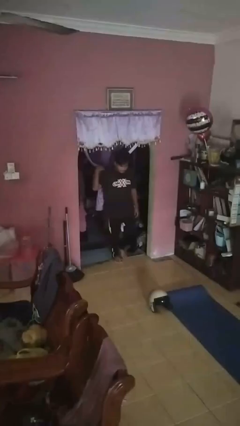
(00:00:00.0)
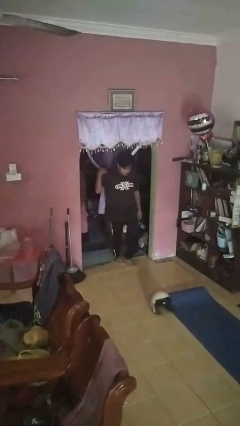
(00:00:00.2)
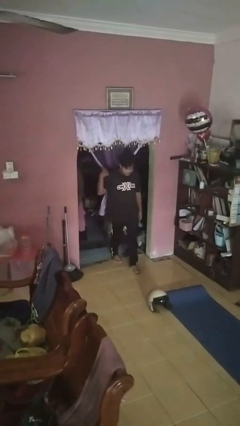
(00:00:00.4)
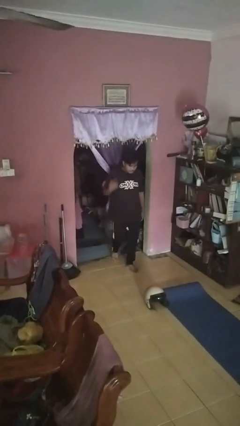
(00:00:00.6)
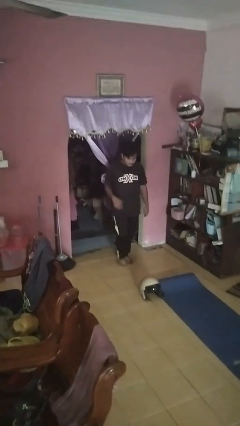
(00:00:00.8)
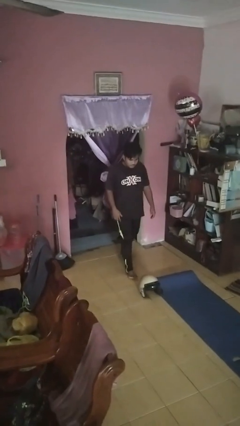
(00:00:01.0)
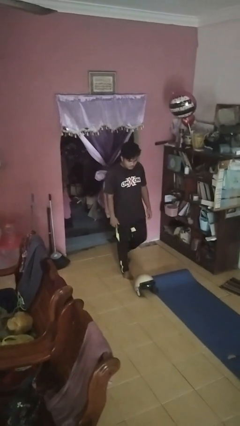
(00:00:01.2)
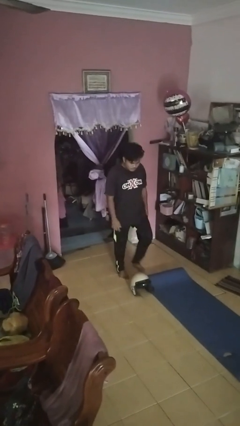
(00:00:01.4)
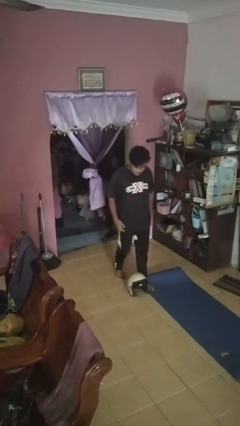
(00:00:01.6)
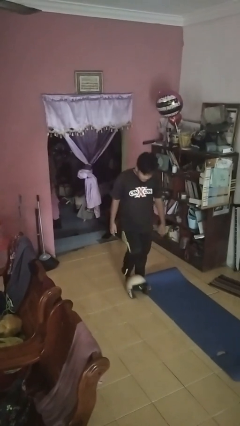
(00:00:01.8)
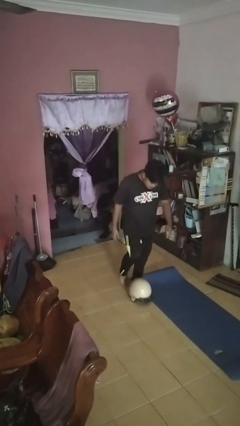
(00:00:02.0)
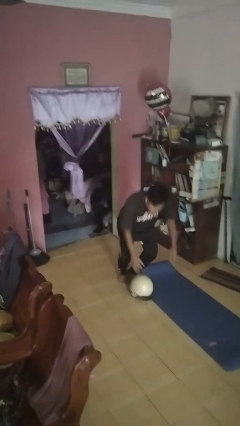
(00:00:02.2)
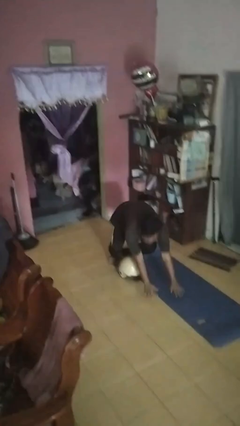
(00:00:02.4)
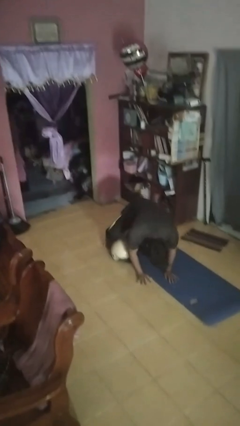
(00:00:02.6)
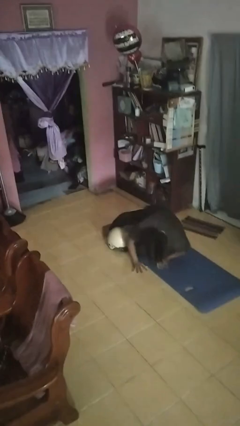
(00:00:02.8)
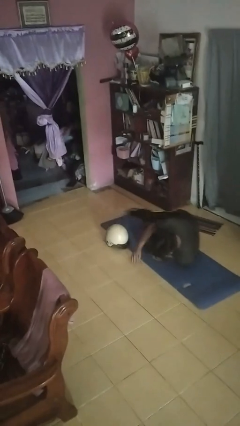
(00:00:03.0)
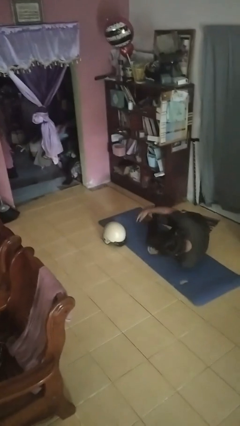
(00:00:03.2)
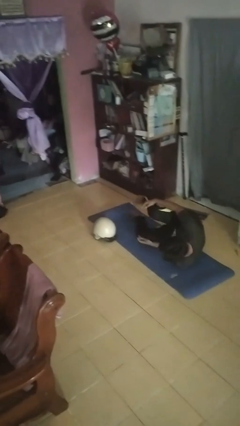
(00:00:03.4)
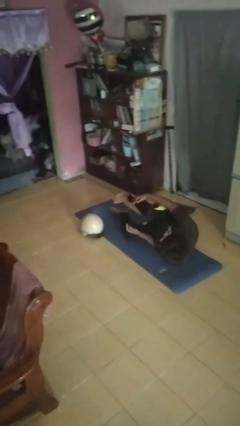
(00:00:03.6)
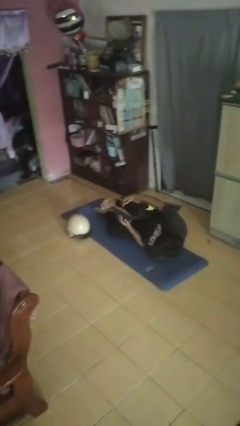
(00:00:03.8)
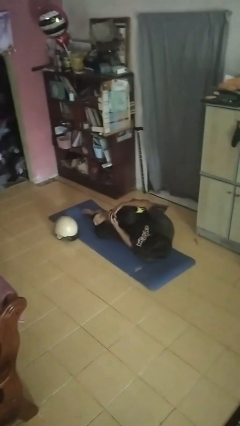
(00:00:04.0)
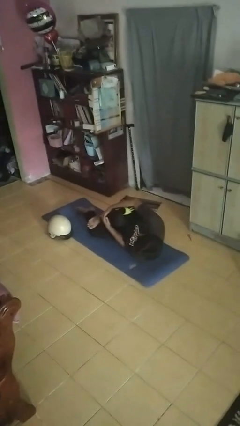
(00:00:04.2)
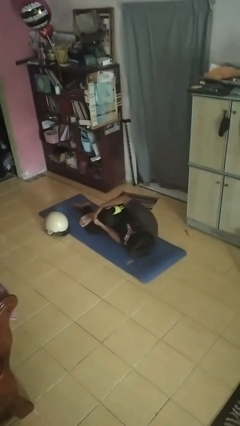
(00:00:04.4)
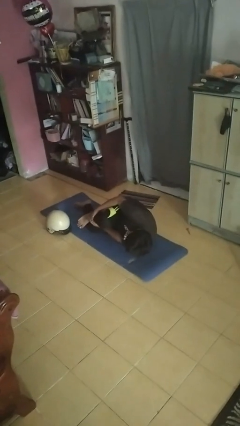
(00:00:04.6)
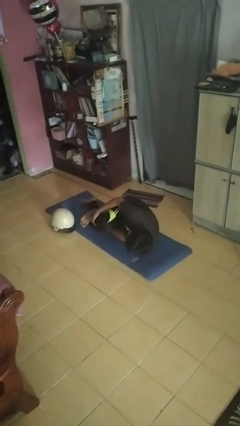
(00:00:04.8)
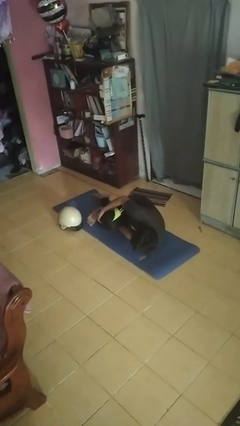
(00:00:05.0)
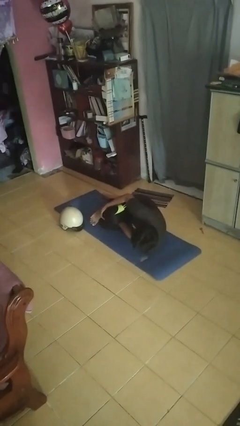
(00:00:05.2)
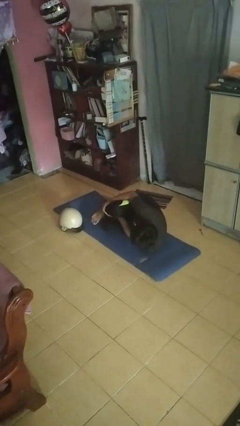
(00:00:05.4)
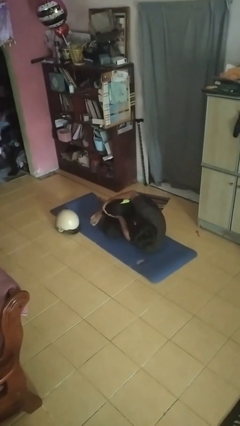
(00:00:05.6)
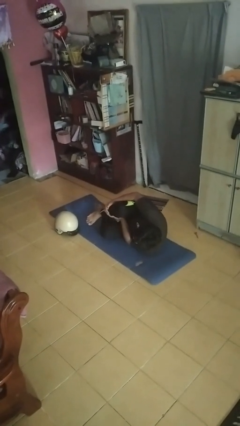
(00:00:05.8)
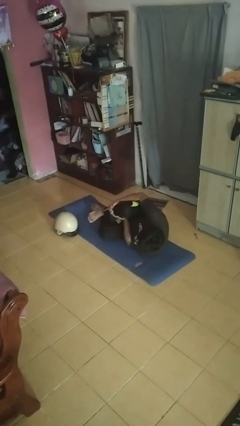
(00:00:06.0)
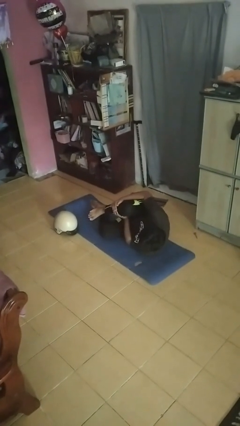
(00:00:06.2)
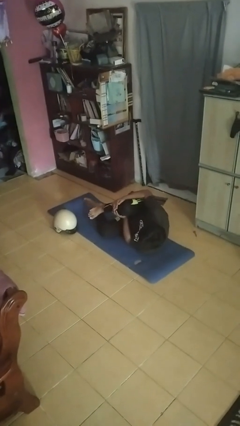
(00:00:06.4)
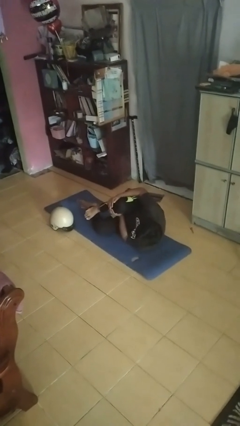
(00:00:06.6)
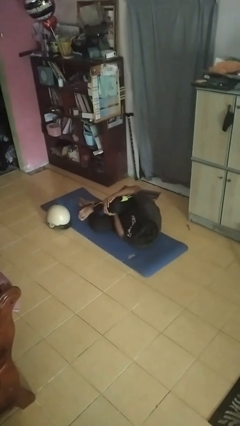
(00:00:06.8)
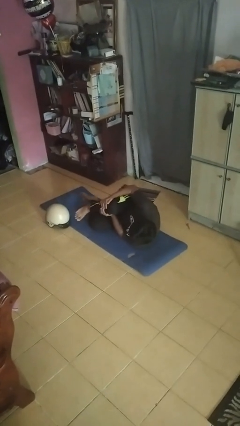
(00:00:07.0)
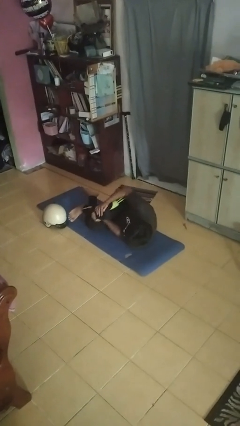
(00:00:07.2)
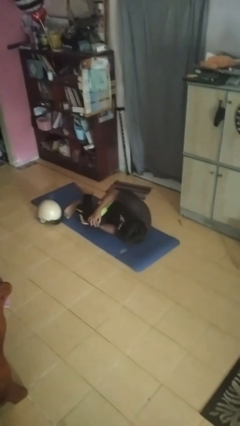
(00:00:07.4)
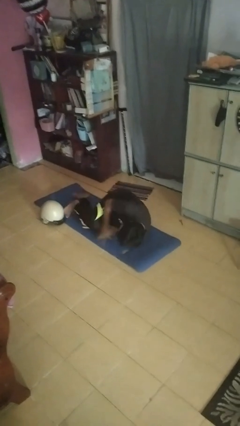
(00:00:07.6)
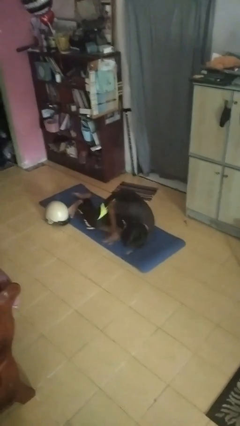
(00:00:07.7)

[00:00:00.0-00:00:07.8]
person trips on object on floor

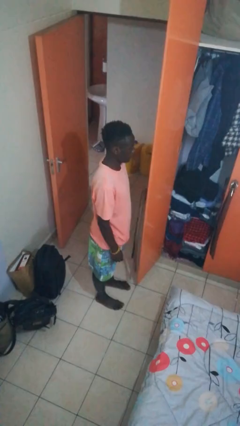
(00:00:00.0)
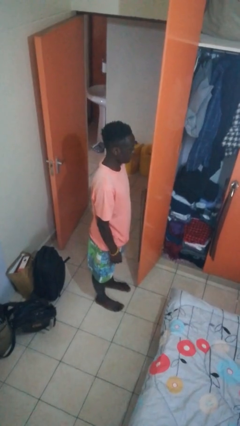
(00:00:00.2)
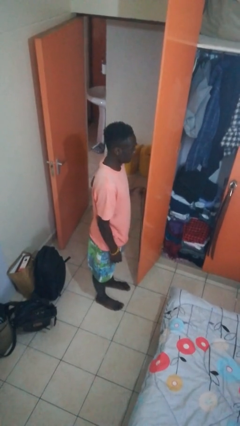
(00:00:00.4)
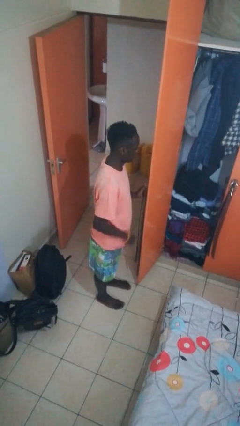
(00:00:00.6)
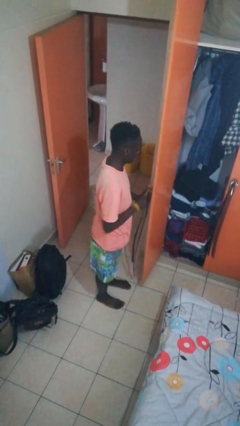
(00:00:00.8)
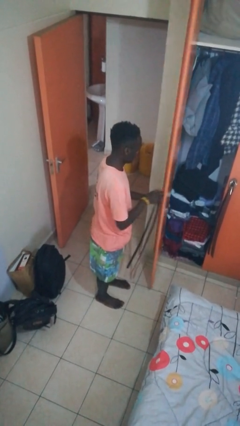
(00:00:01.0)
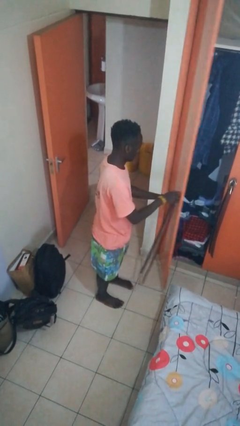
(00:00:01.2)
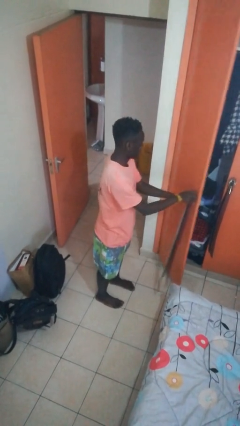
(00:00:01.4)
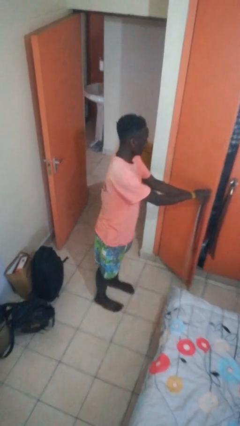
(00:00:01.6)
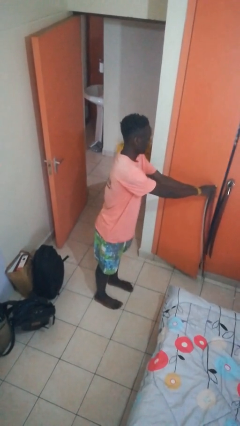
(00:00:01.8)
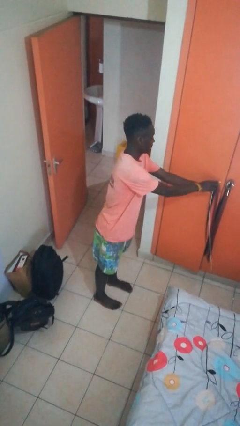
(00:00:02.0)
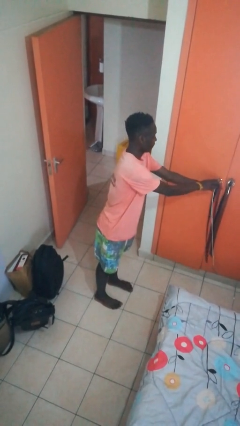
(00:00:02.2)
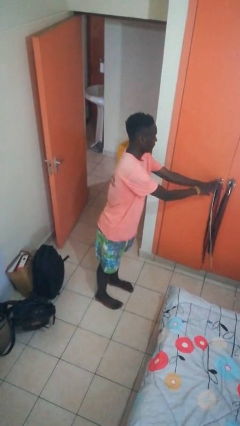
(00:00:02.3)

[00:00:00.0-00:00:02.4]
person closes closet door

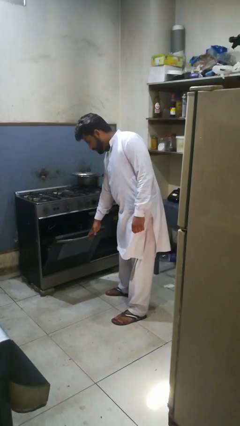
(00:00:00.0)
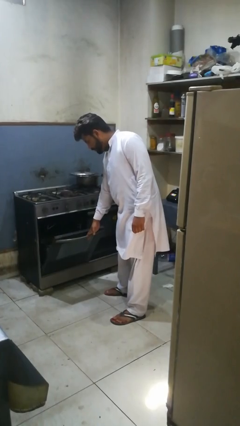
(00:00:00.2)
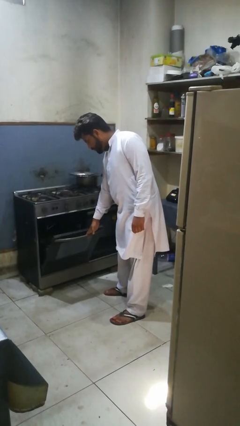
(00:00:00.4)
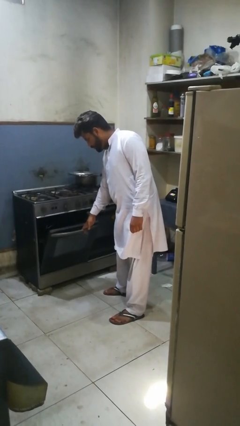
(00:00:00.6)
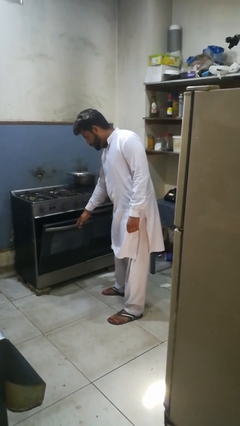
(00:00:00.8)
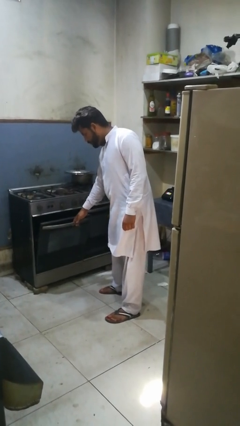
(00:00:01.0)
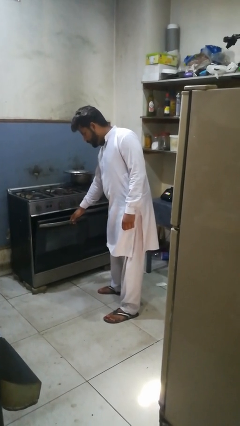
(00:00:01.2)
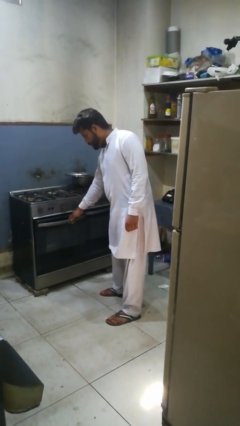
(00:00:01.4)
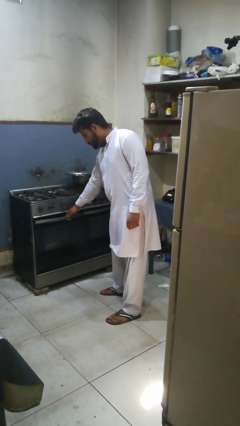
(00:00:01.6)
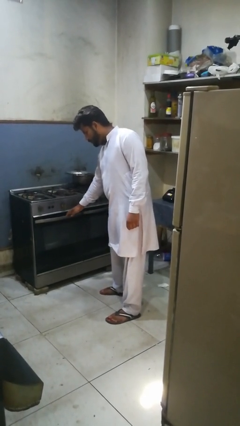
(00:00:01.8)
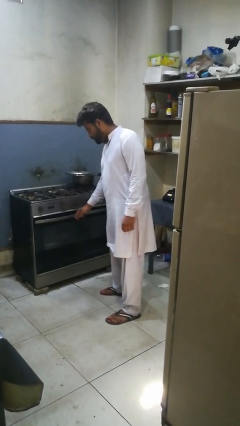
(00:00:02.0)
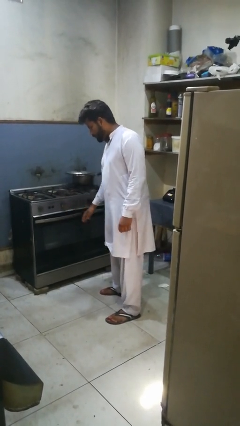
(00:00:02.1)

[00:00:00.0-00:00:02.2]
person closes oven door

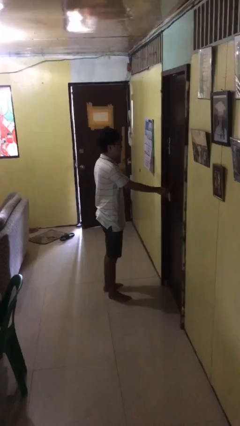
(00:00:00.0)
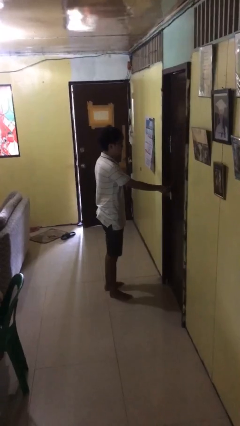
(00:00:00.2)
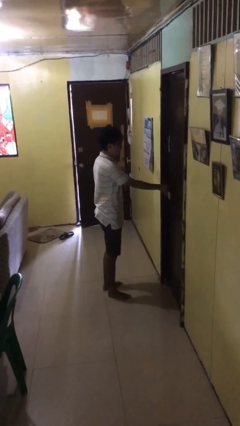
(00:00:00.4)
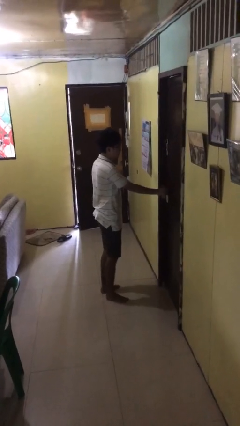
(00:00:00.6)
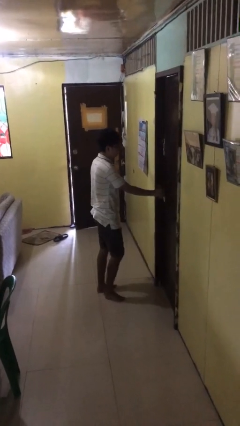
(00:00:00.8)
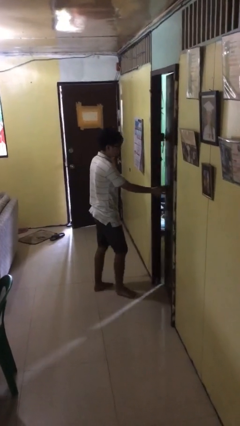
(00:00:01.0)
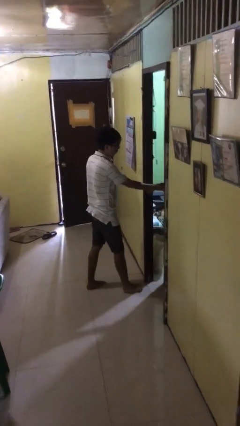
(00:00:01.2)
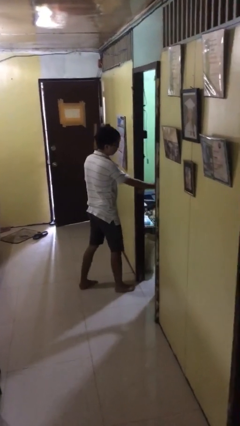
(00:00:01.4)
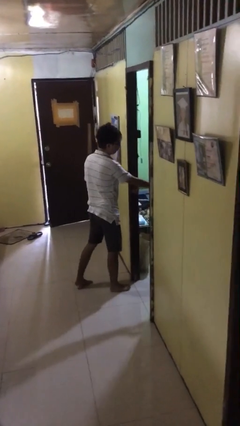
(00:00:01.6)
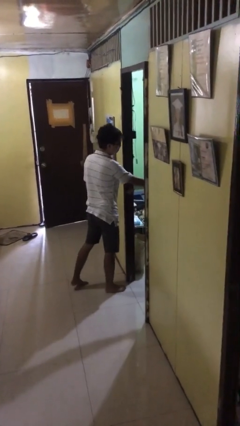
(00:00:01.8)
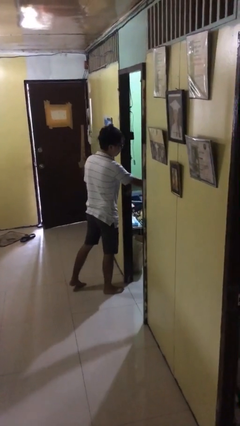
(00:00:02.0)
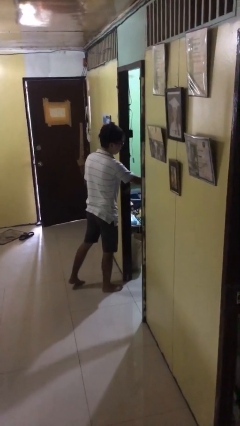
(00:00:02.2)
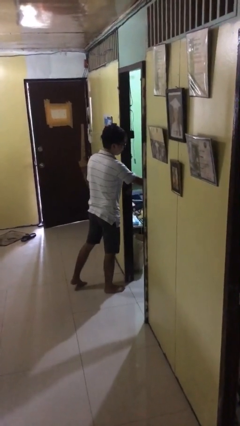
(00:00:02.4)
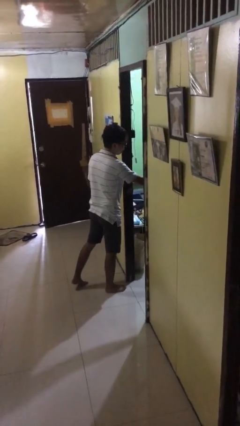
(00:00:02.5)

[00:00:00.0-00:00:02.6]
person opens facility door

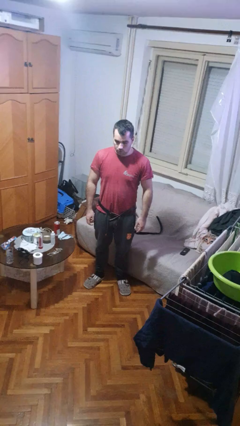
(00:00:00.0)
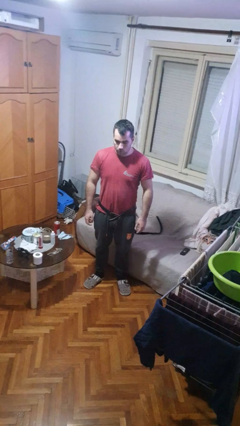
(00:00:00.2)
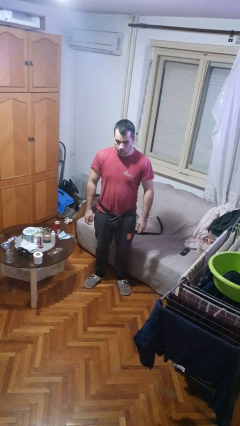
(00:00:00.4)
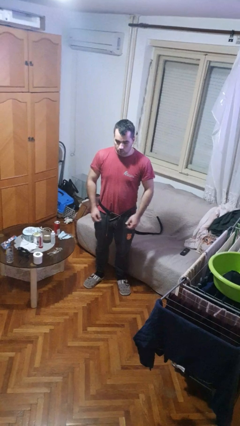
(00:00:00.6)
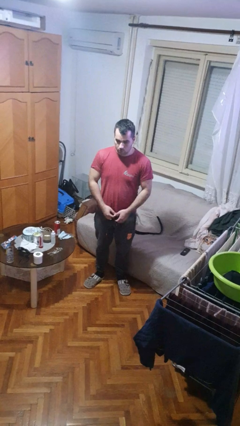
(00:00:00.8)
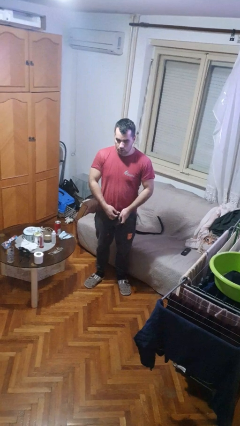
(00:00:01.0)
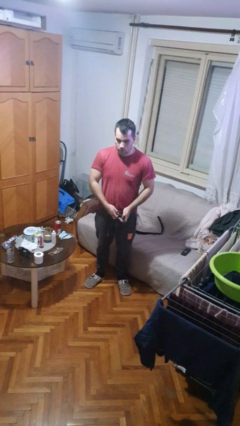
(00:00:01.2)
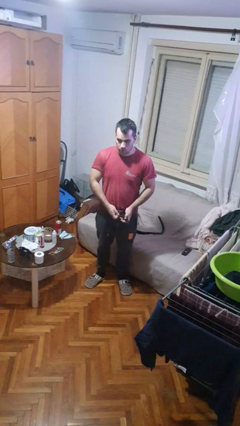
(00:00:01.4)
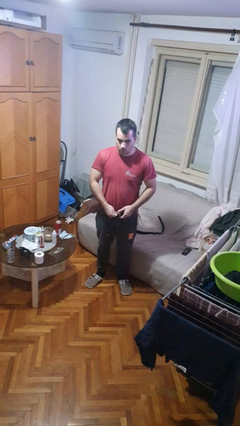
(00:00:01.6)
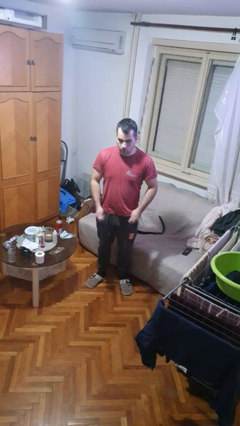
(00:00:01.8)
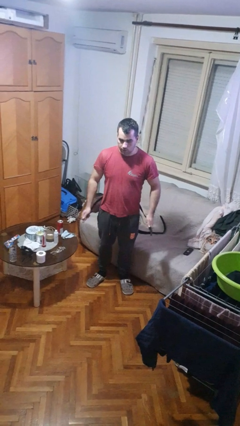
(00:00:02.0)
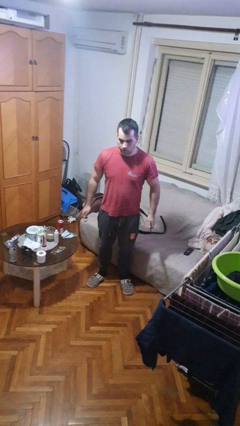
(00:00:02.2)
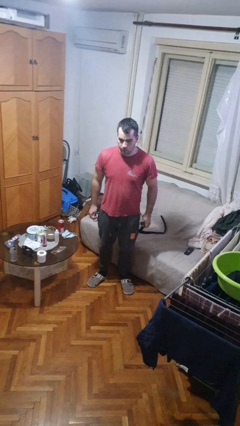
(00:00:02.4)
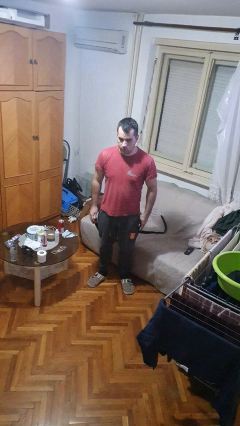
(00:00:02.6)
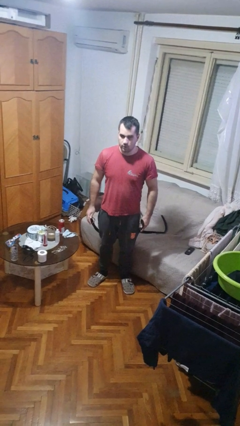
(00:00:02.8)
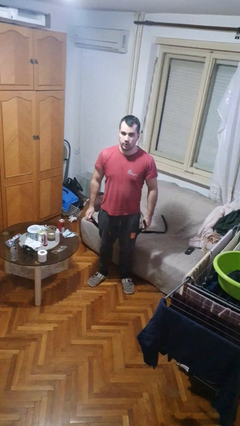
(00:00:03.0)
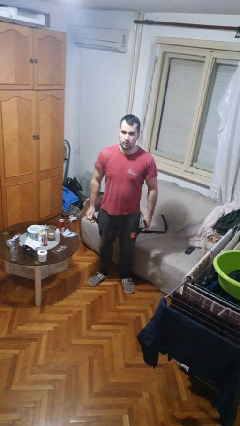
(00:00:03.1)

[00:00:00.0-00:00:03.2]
person takes off belt
